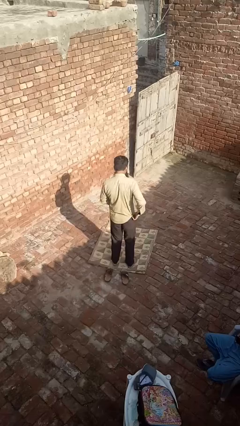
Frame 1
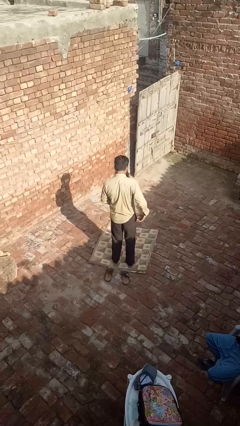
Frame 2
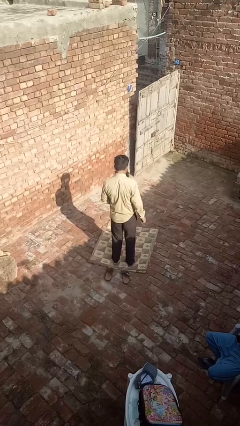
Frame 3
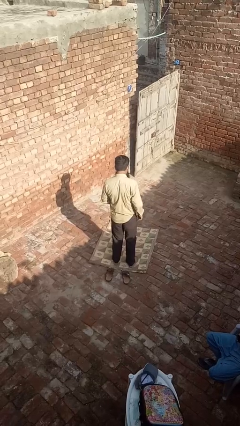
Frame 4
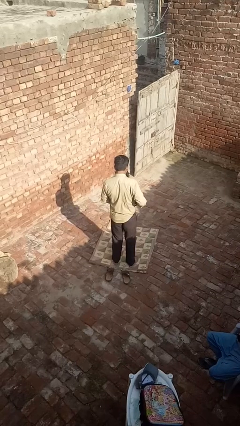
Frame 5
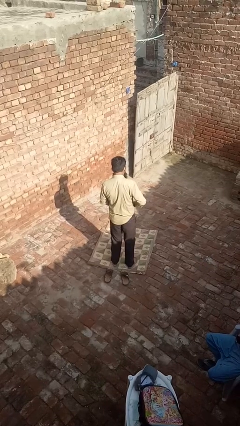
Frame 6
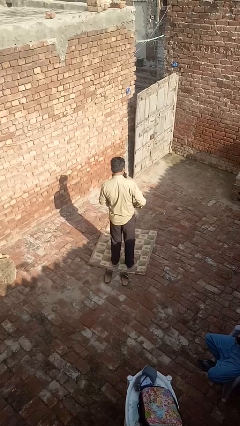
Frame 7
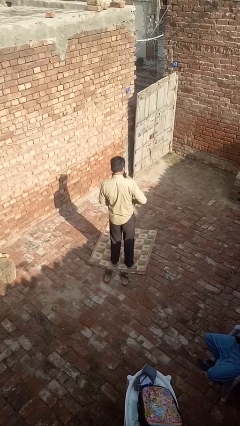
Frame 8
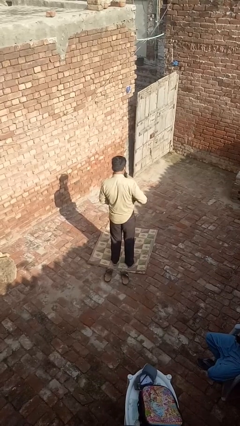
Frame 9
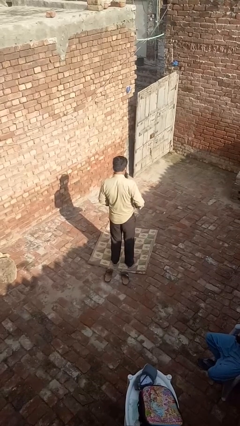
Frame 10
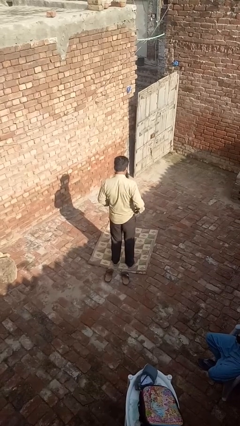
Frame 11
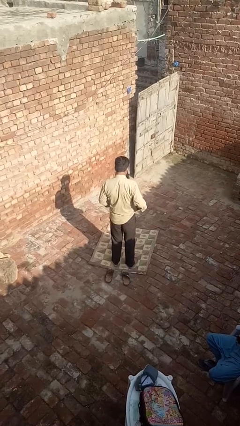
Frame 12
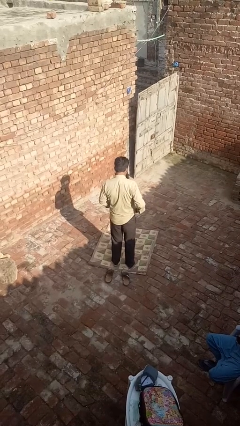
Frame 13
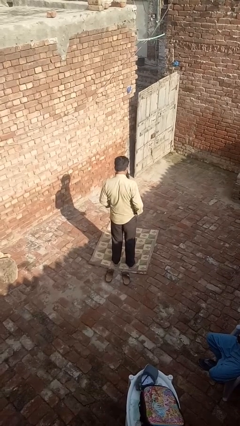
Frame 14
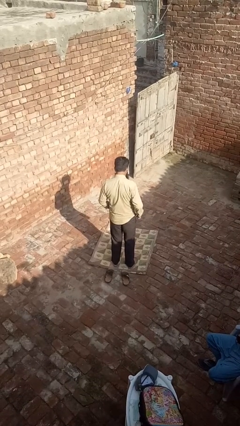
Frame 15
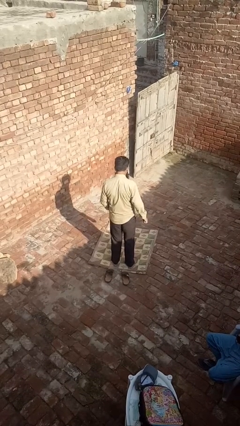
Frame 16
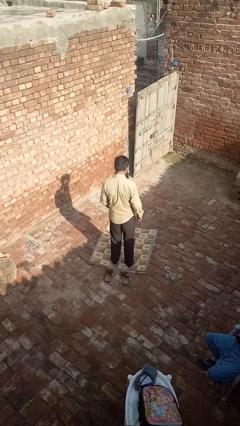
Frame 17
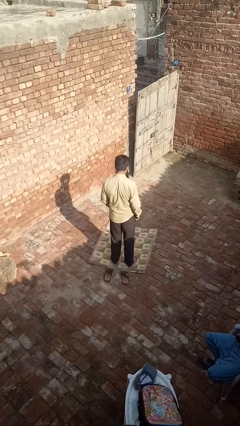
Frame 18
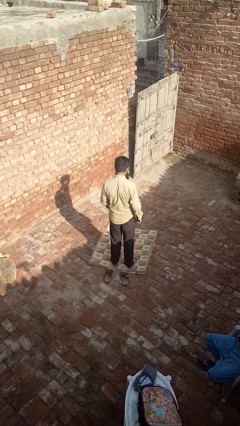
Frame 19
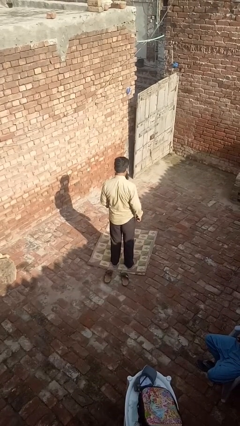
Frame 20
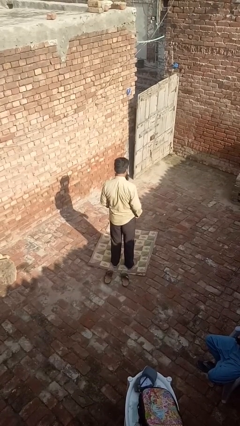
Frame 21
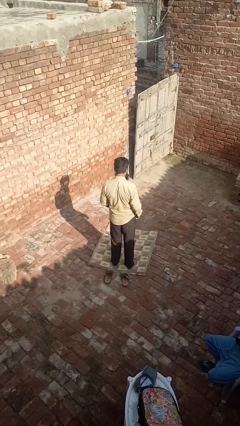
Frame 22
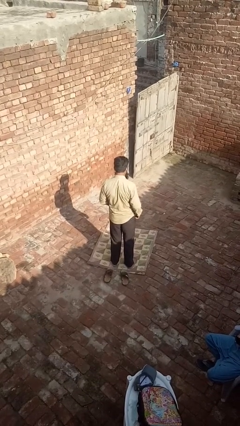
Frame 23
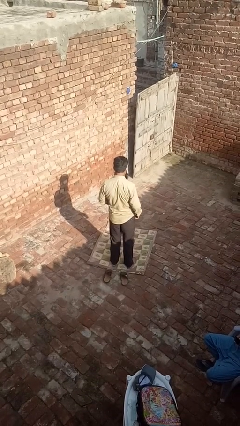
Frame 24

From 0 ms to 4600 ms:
person untucks shirt

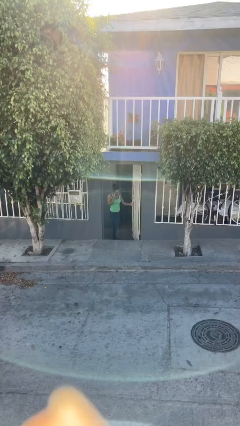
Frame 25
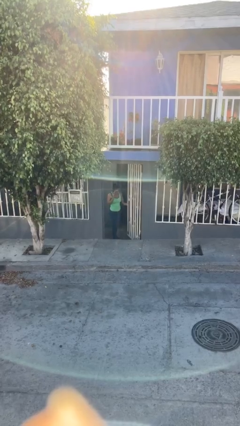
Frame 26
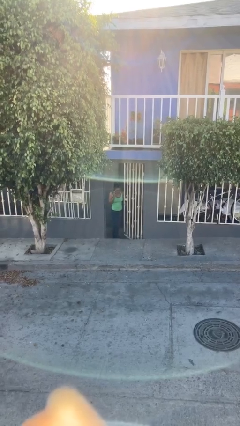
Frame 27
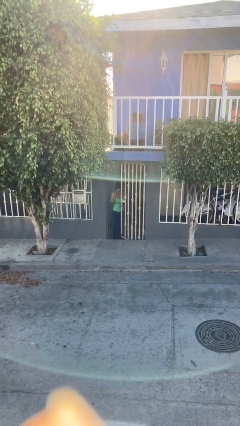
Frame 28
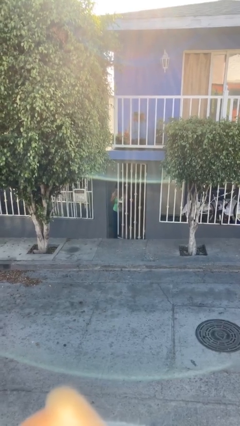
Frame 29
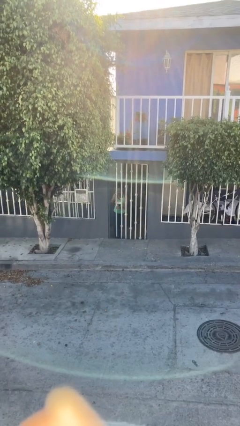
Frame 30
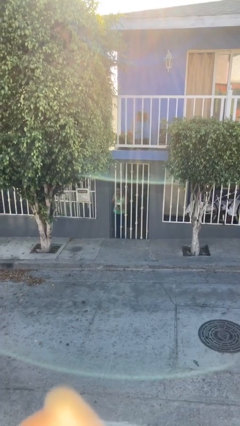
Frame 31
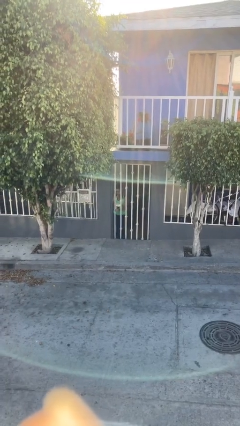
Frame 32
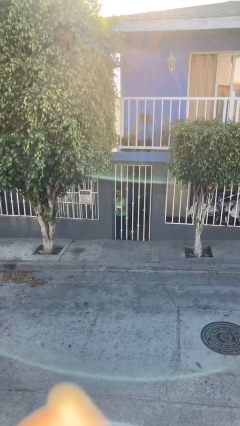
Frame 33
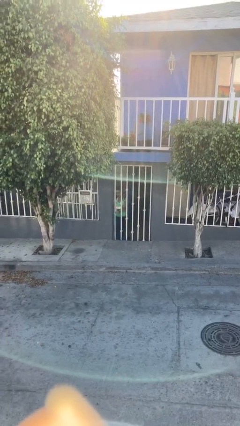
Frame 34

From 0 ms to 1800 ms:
person closes facility door

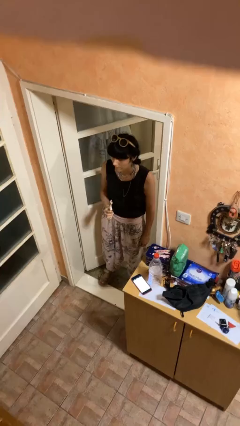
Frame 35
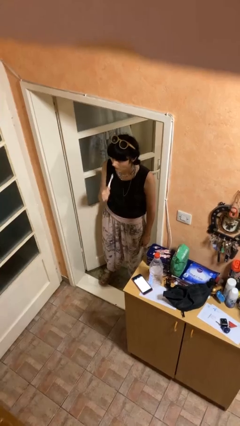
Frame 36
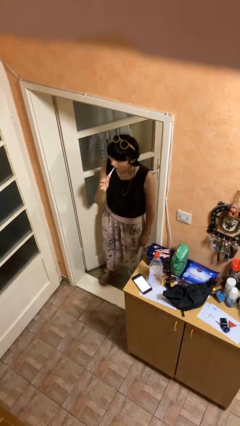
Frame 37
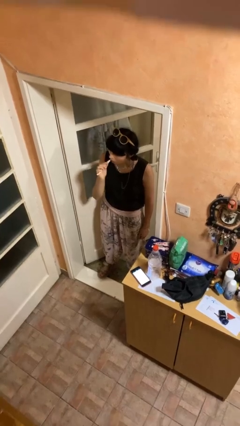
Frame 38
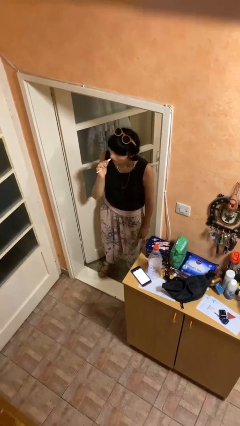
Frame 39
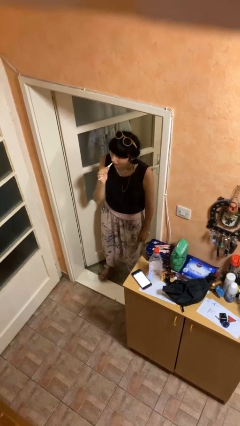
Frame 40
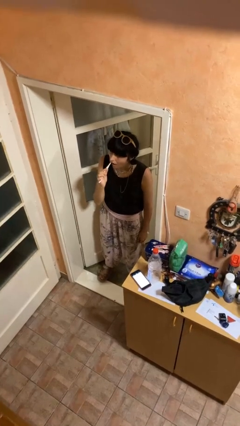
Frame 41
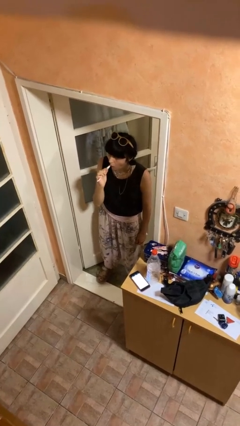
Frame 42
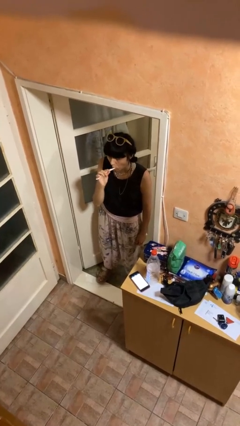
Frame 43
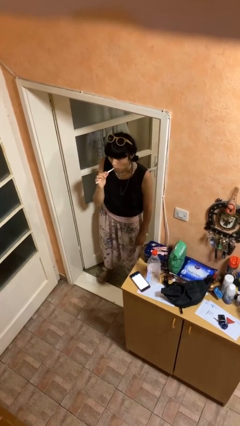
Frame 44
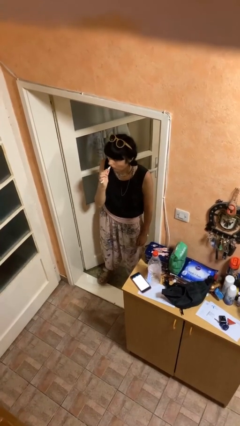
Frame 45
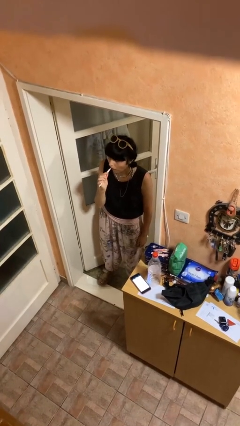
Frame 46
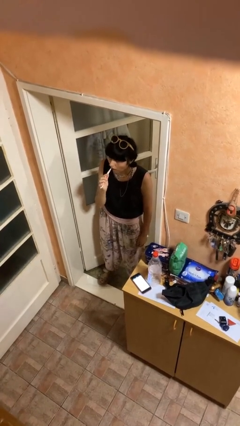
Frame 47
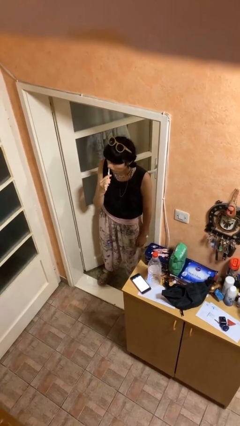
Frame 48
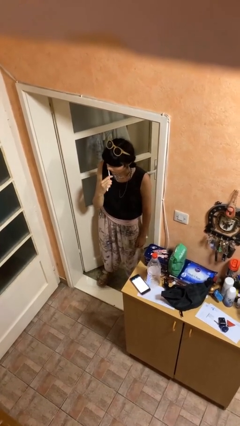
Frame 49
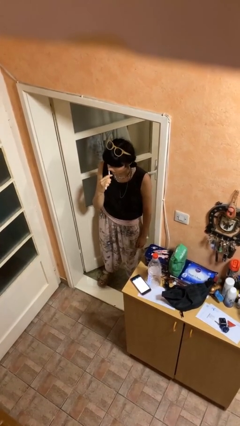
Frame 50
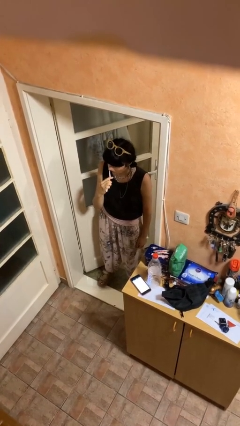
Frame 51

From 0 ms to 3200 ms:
person brushes teeth

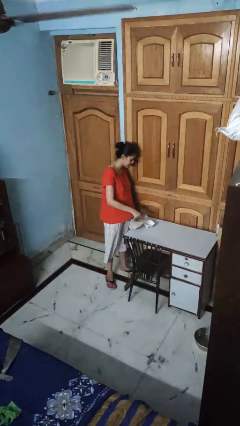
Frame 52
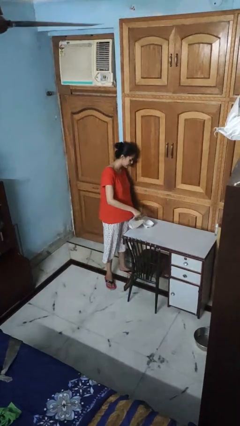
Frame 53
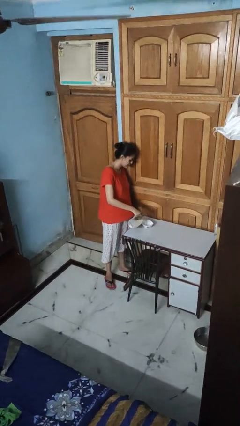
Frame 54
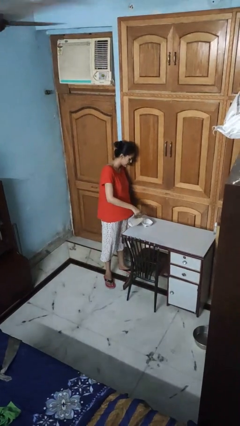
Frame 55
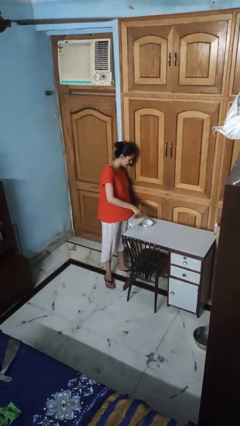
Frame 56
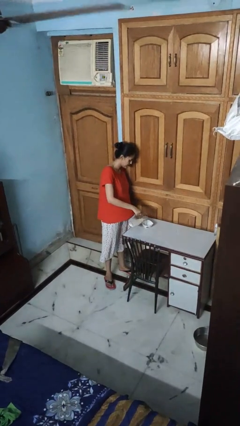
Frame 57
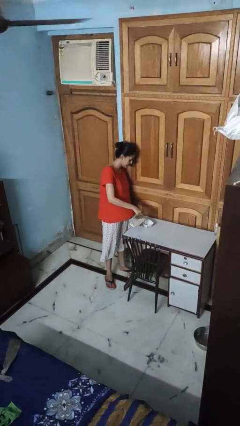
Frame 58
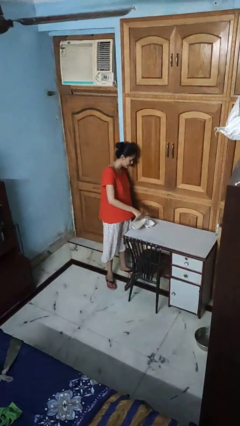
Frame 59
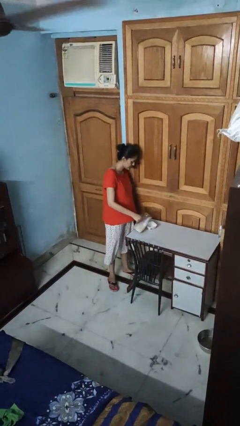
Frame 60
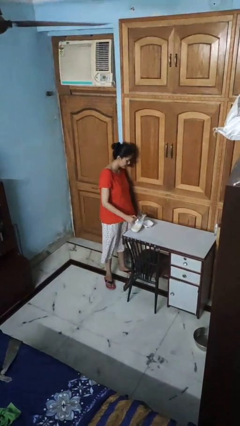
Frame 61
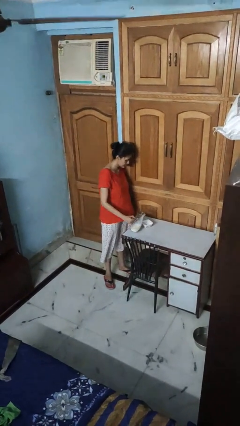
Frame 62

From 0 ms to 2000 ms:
person pours into bowl

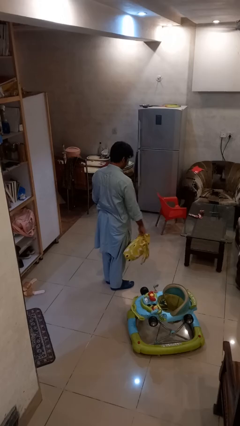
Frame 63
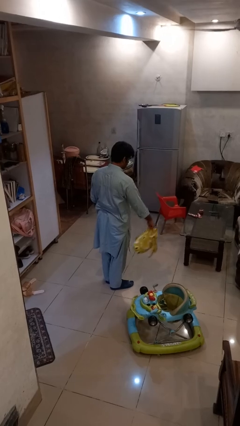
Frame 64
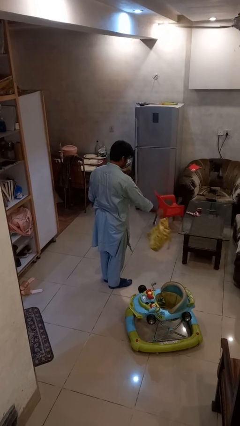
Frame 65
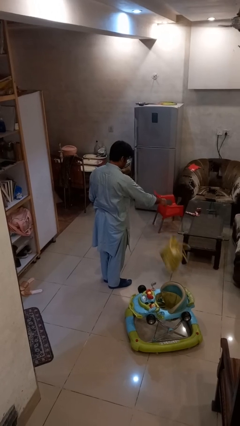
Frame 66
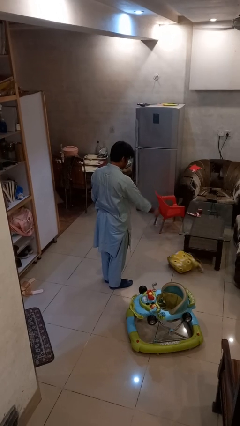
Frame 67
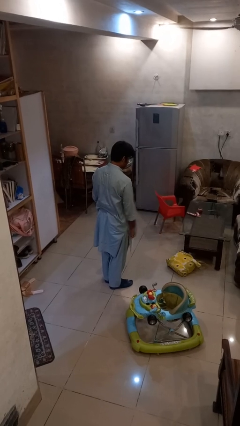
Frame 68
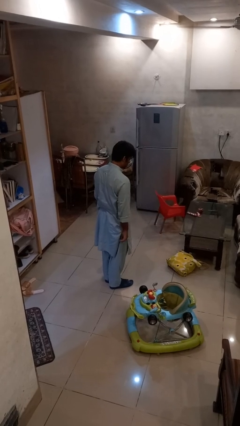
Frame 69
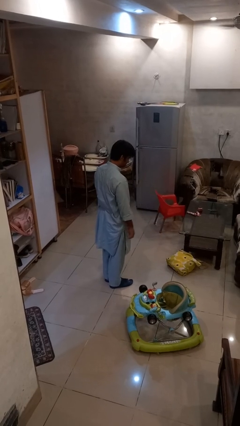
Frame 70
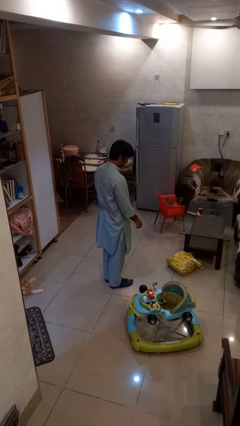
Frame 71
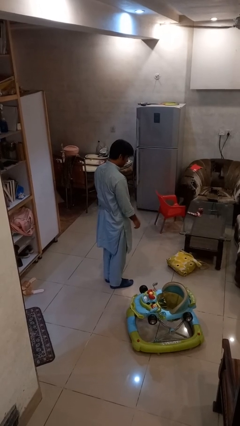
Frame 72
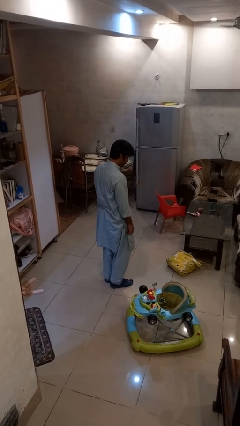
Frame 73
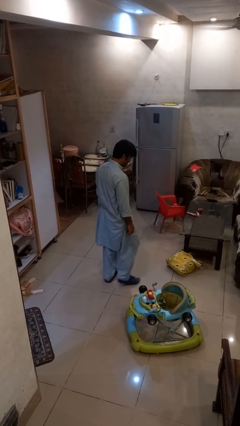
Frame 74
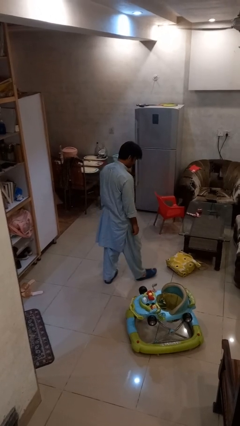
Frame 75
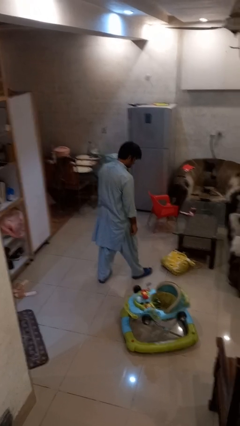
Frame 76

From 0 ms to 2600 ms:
person throws object to ground

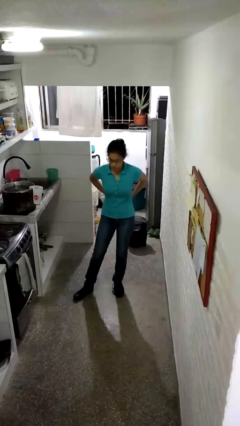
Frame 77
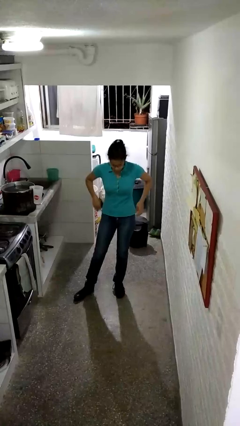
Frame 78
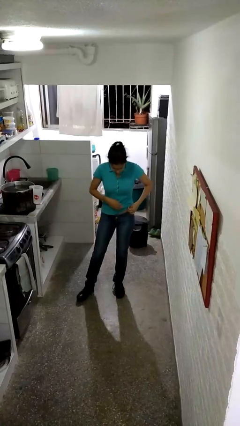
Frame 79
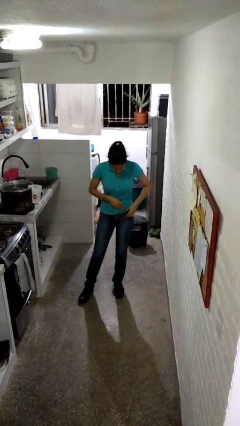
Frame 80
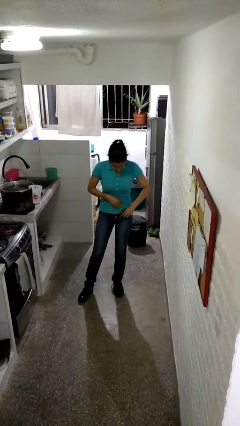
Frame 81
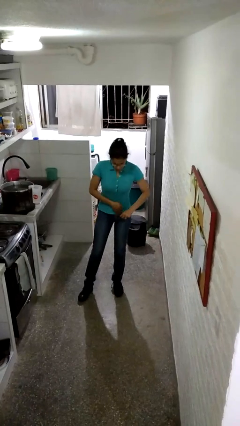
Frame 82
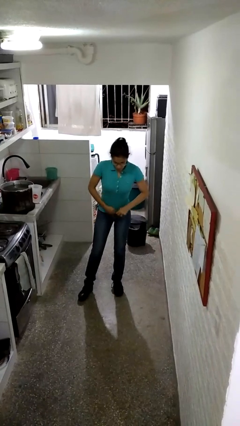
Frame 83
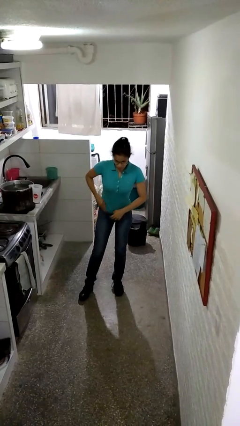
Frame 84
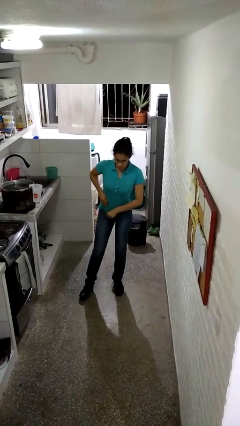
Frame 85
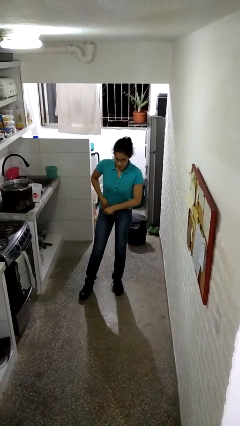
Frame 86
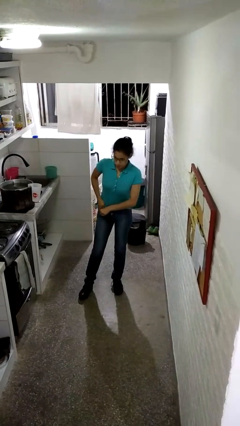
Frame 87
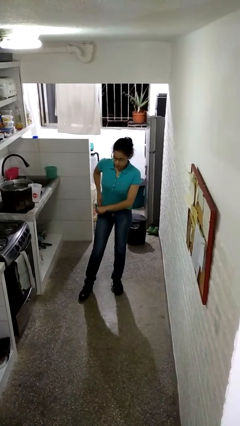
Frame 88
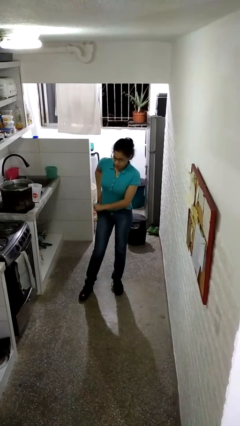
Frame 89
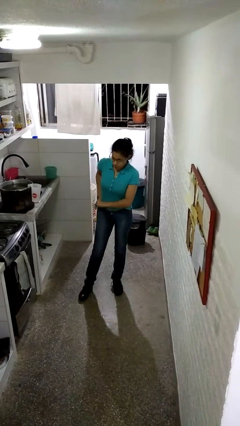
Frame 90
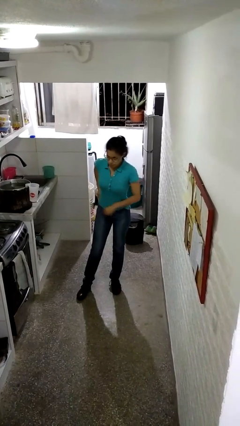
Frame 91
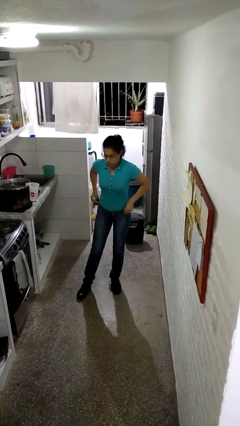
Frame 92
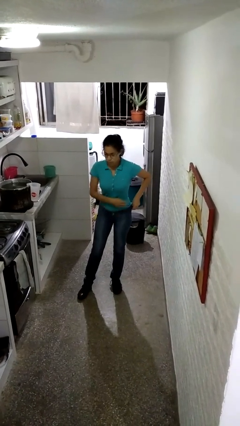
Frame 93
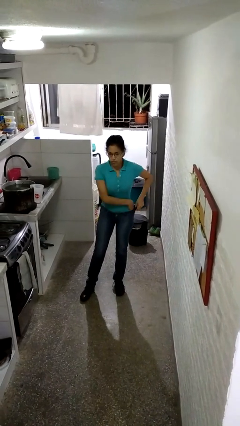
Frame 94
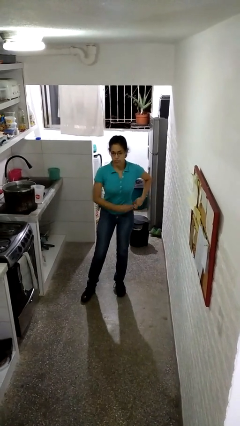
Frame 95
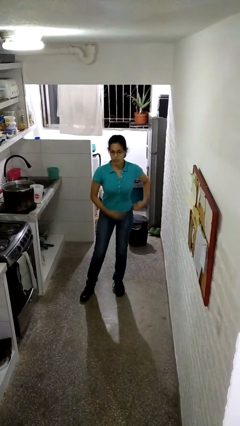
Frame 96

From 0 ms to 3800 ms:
person tucks in shirt
